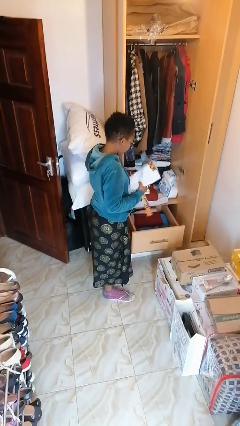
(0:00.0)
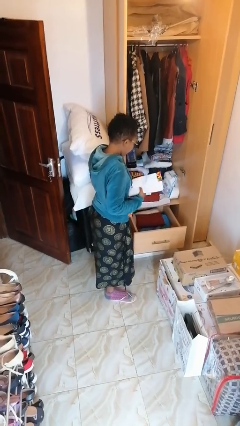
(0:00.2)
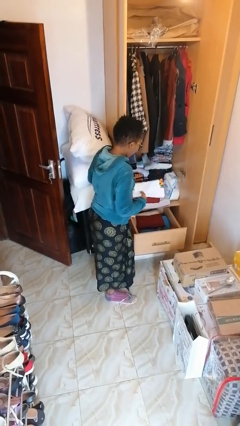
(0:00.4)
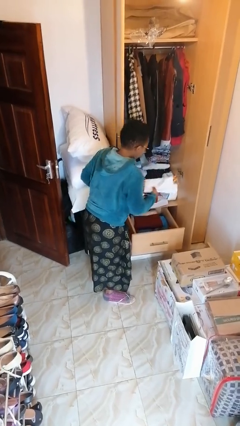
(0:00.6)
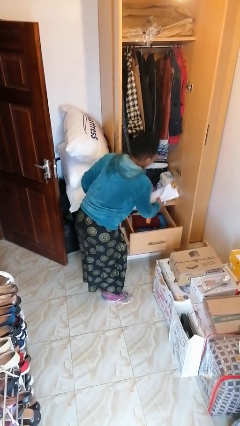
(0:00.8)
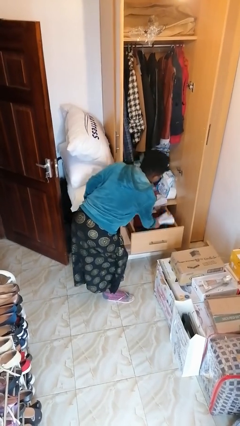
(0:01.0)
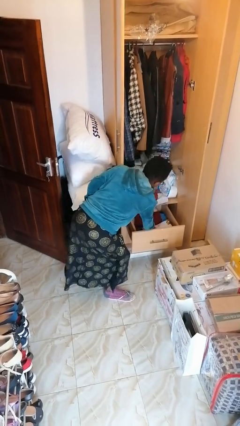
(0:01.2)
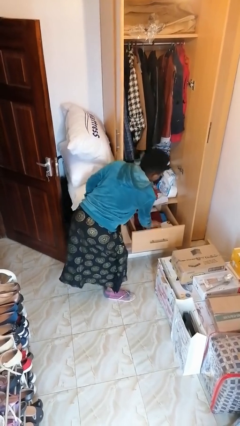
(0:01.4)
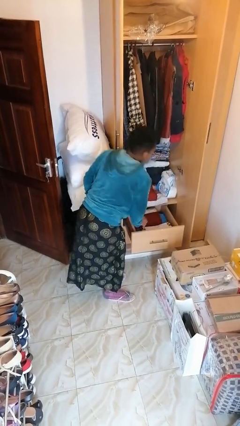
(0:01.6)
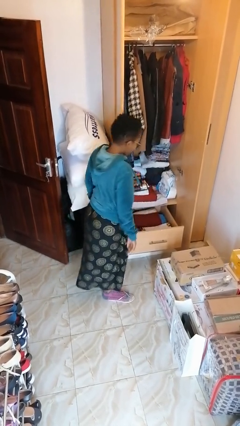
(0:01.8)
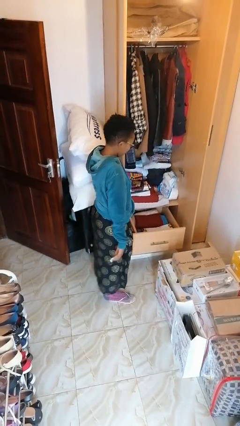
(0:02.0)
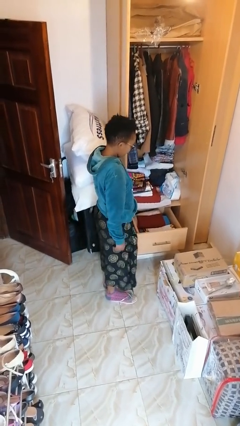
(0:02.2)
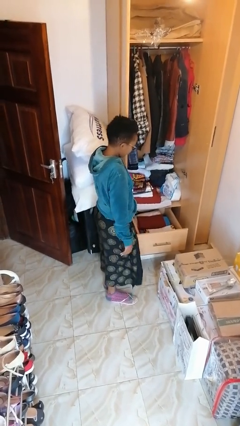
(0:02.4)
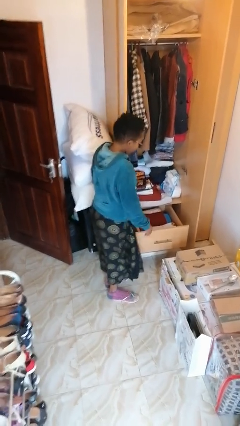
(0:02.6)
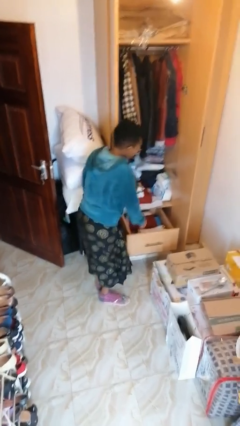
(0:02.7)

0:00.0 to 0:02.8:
person puts clothes into dresser

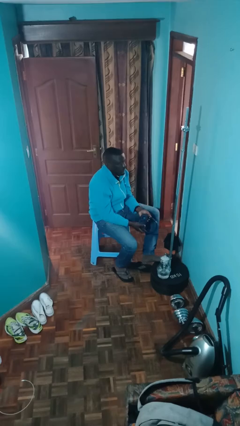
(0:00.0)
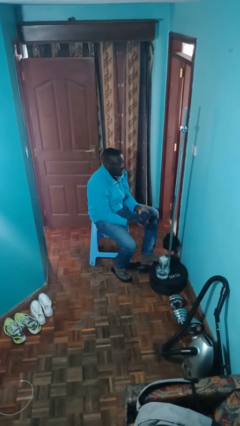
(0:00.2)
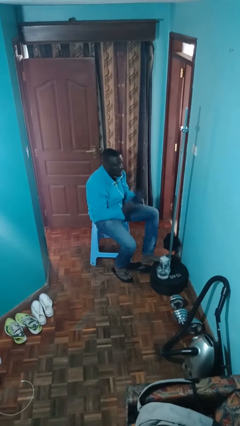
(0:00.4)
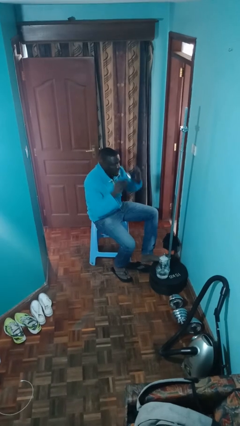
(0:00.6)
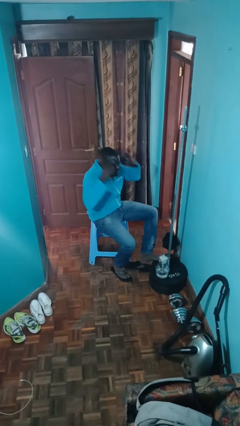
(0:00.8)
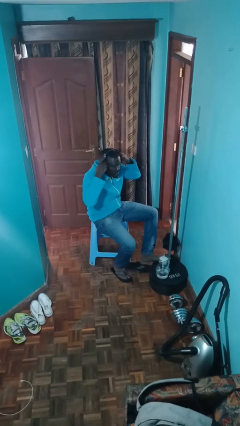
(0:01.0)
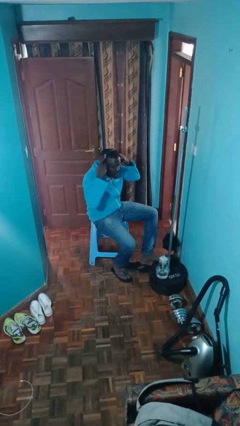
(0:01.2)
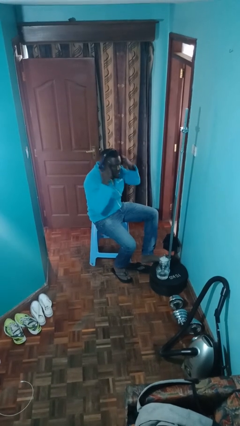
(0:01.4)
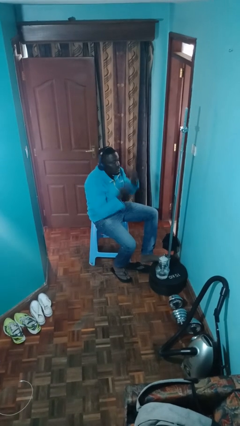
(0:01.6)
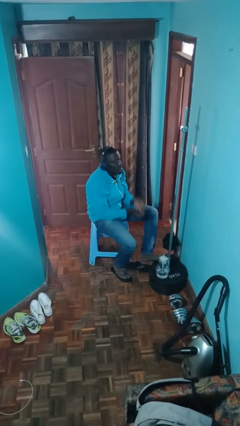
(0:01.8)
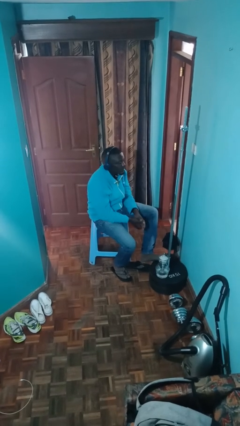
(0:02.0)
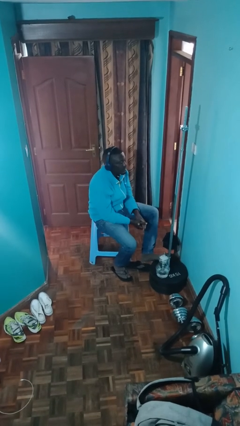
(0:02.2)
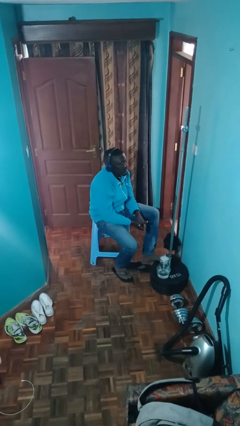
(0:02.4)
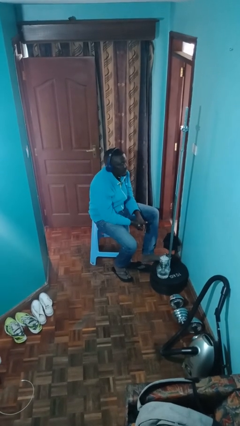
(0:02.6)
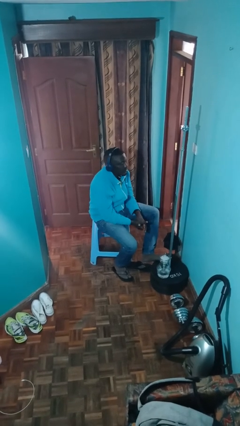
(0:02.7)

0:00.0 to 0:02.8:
person puts on headphones

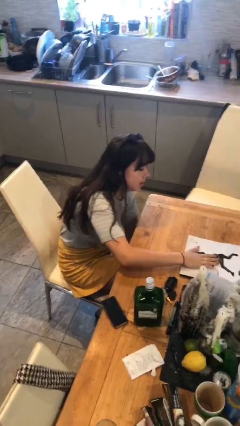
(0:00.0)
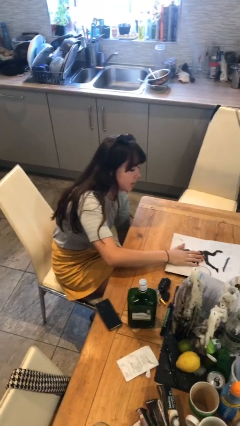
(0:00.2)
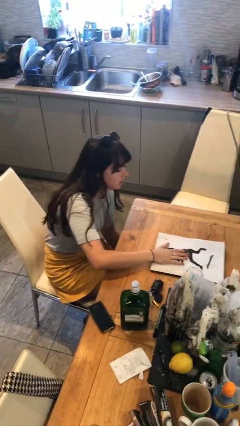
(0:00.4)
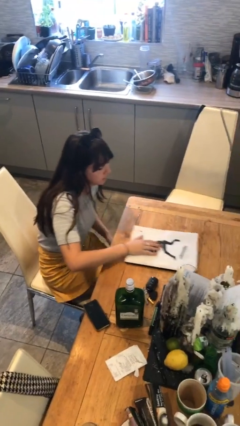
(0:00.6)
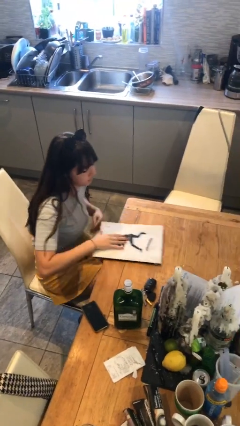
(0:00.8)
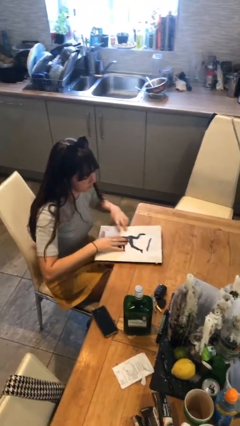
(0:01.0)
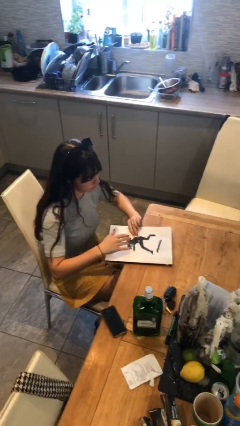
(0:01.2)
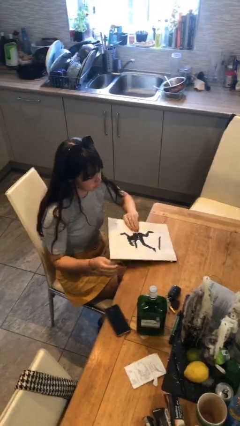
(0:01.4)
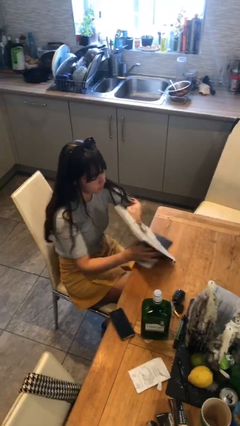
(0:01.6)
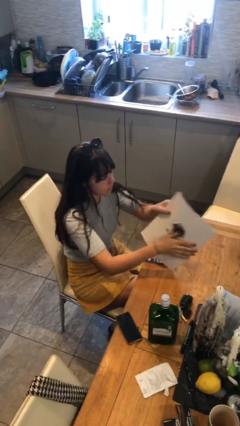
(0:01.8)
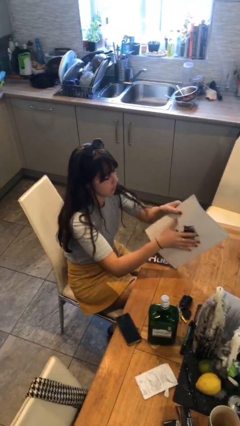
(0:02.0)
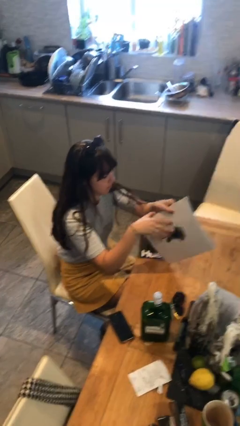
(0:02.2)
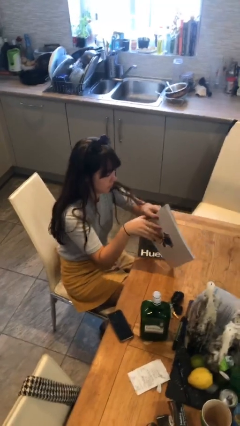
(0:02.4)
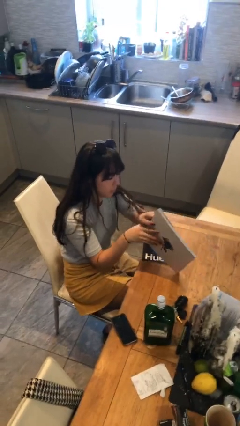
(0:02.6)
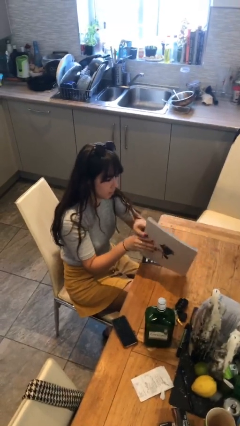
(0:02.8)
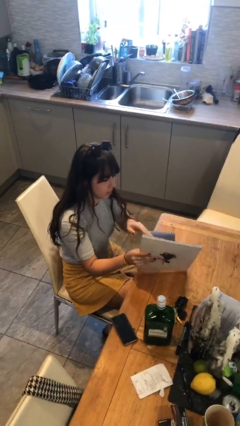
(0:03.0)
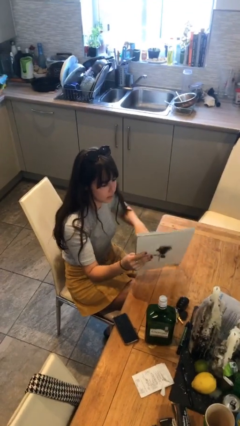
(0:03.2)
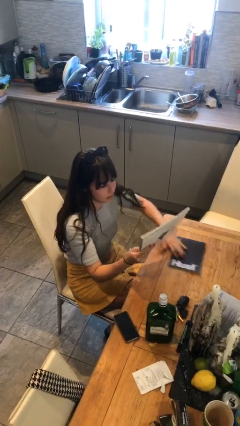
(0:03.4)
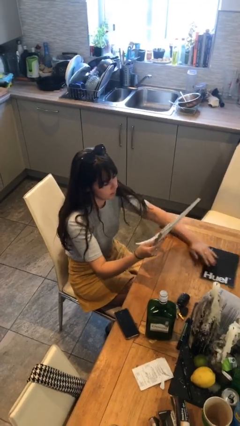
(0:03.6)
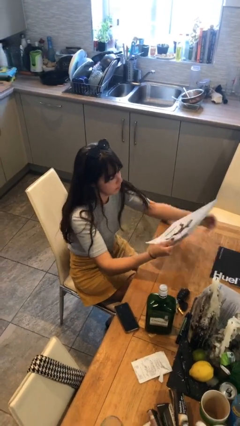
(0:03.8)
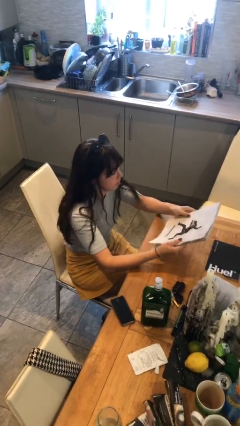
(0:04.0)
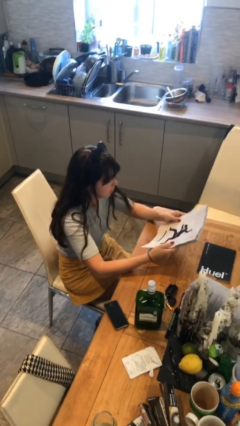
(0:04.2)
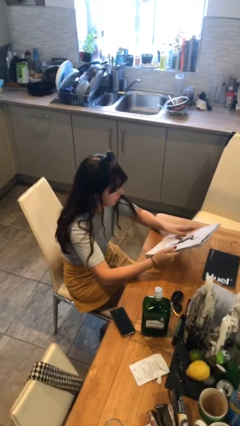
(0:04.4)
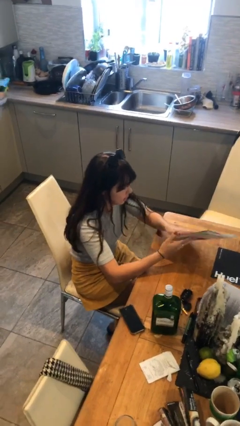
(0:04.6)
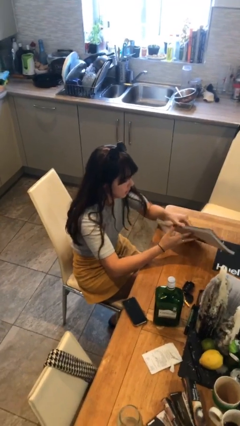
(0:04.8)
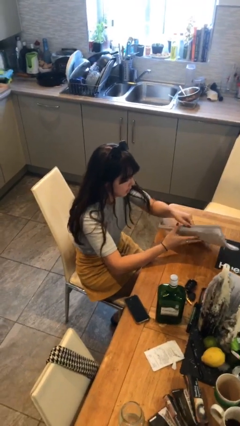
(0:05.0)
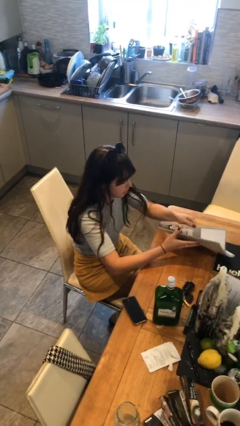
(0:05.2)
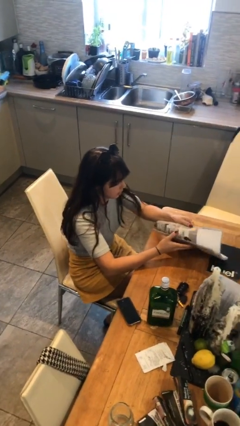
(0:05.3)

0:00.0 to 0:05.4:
person picks up object from table

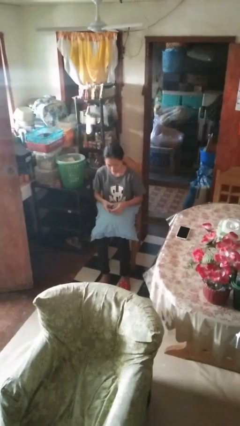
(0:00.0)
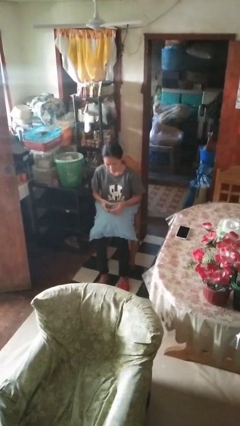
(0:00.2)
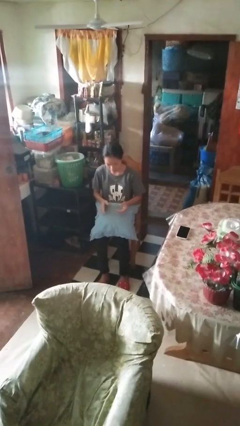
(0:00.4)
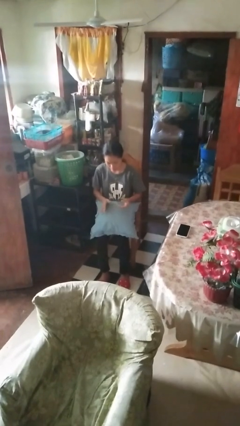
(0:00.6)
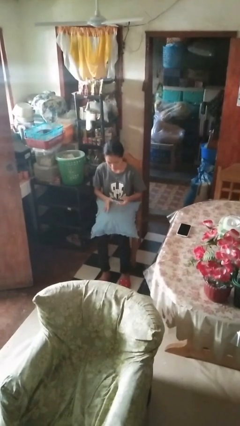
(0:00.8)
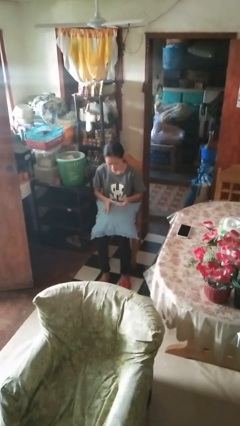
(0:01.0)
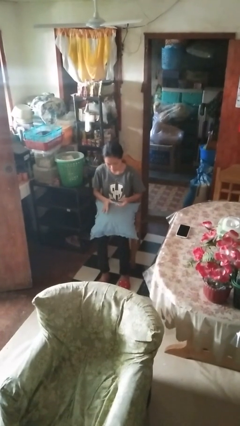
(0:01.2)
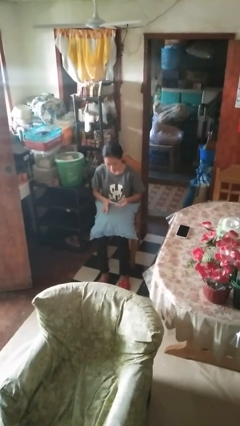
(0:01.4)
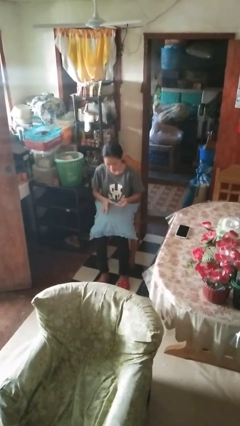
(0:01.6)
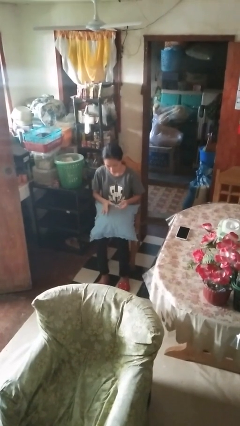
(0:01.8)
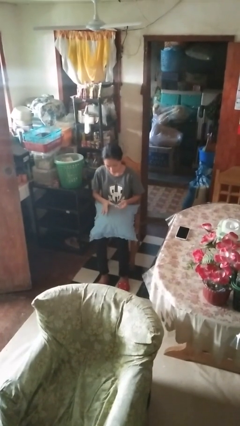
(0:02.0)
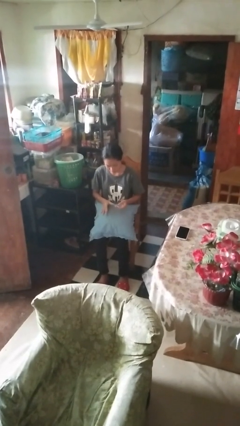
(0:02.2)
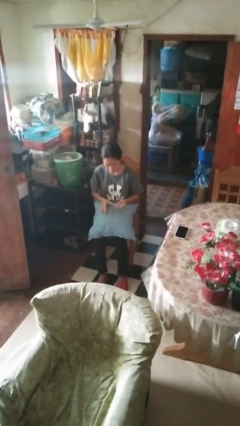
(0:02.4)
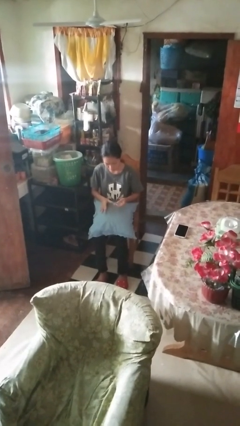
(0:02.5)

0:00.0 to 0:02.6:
person clips fingernails

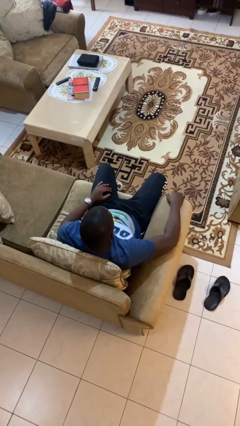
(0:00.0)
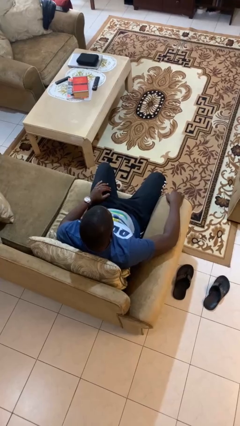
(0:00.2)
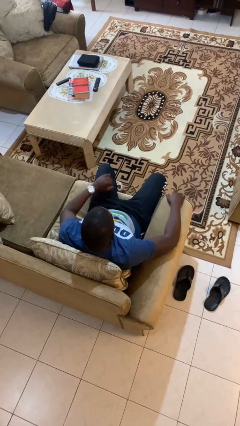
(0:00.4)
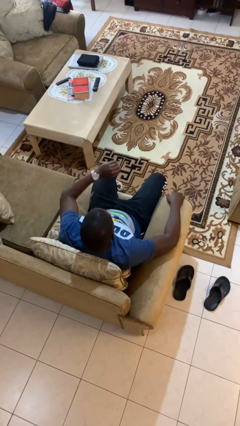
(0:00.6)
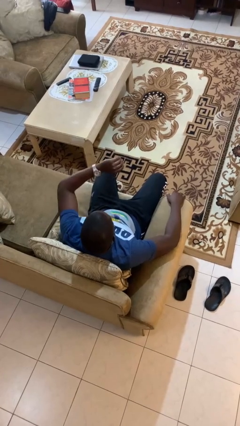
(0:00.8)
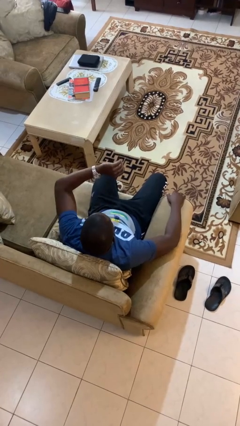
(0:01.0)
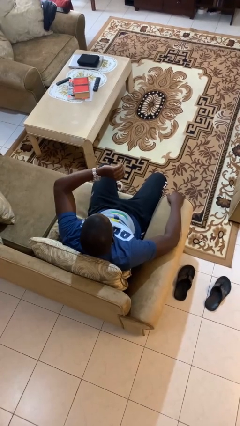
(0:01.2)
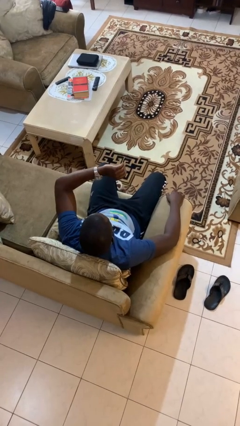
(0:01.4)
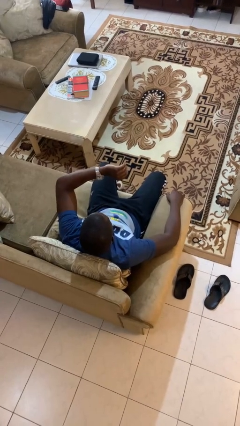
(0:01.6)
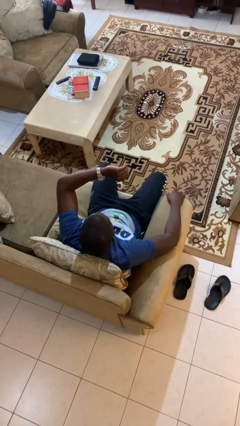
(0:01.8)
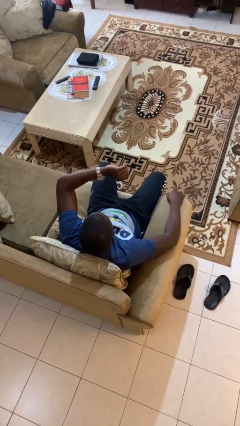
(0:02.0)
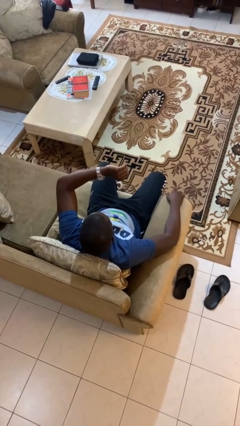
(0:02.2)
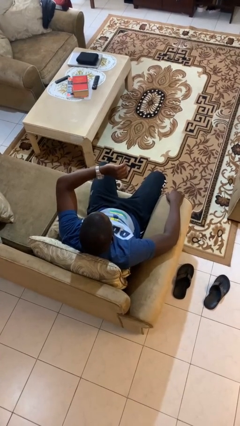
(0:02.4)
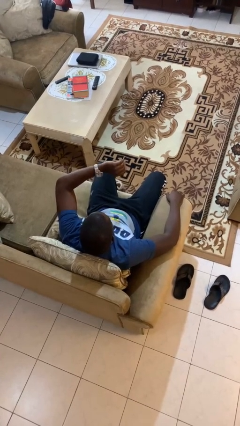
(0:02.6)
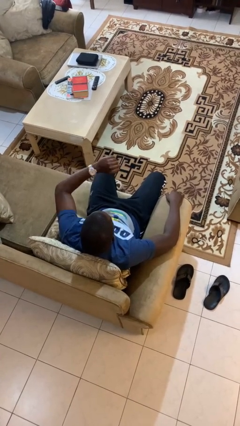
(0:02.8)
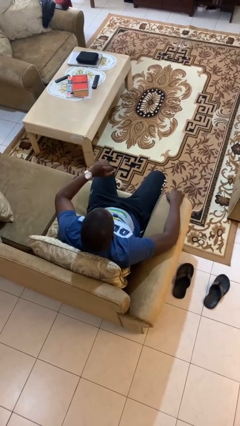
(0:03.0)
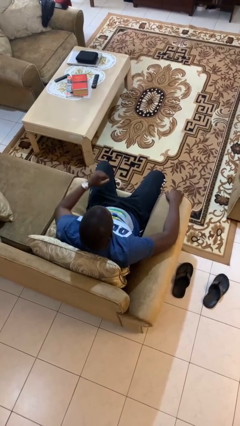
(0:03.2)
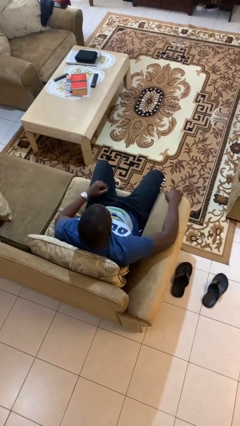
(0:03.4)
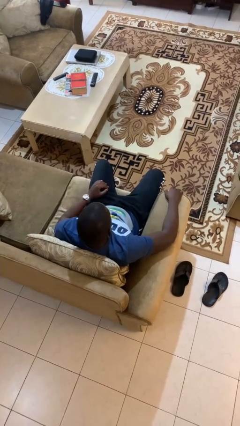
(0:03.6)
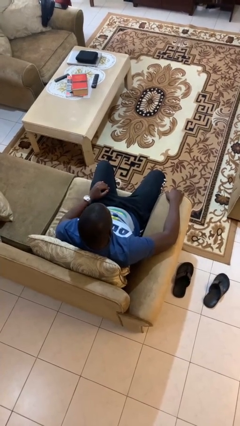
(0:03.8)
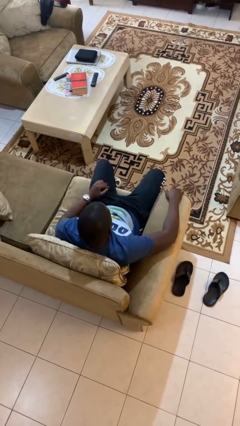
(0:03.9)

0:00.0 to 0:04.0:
person looks at wristwatch
